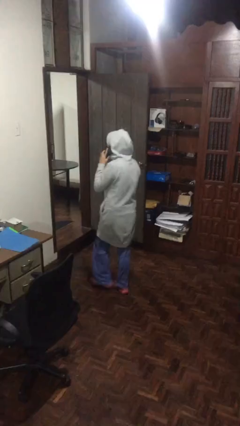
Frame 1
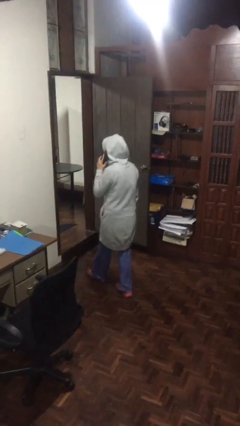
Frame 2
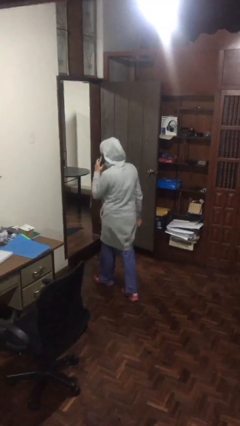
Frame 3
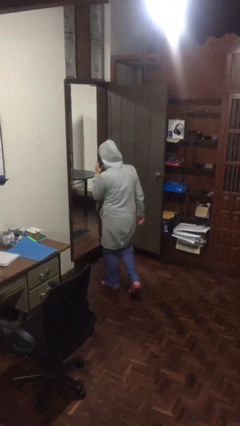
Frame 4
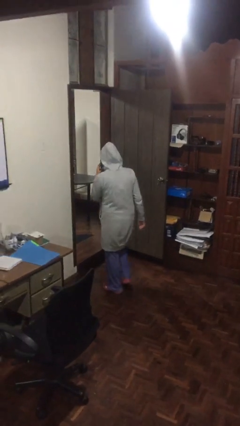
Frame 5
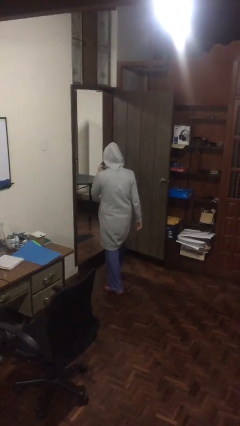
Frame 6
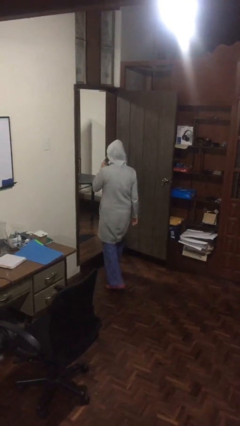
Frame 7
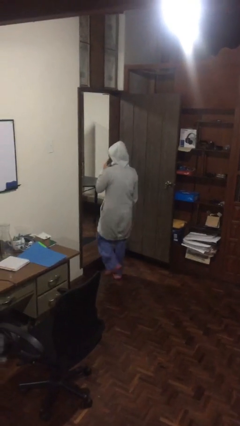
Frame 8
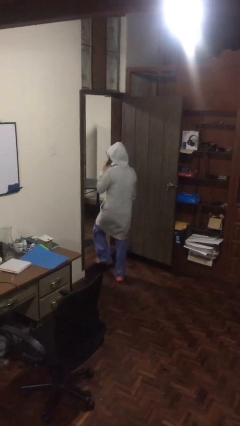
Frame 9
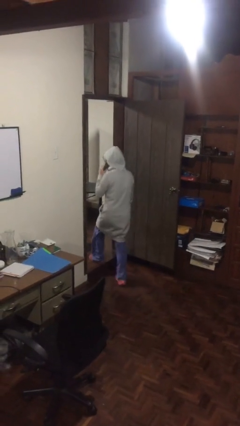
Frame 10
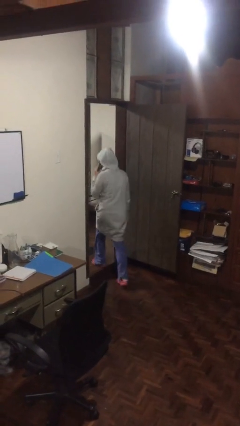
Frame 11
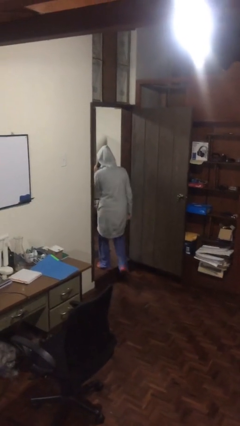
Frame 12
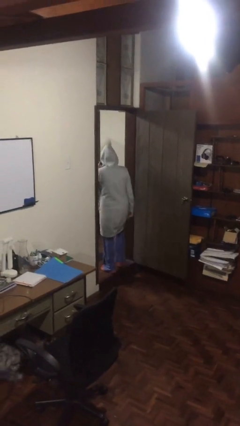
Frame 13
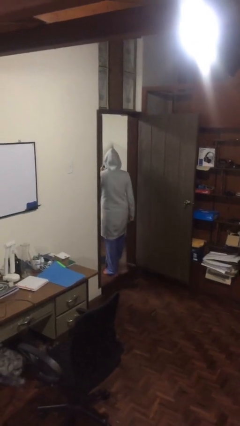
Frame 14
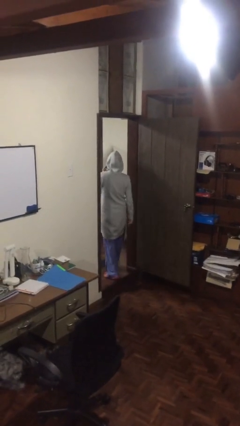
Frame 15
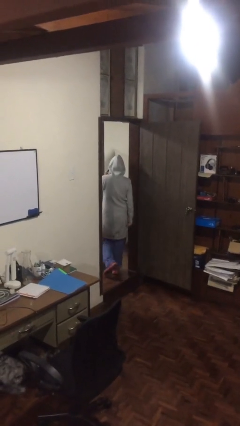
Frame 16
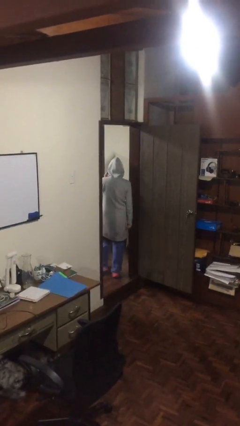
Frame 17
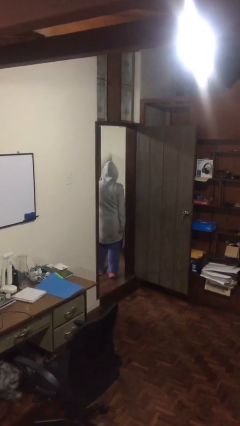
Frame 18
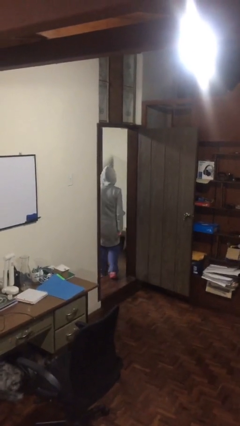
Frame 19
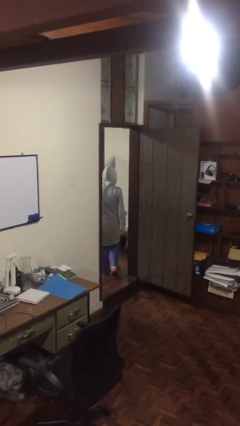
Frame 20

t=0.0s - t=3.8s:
person exits scene through structure

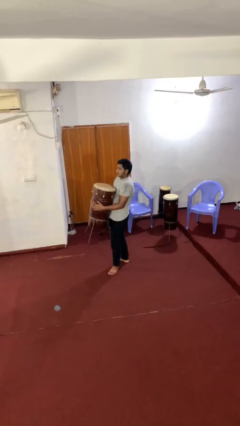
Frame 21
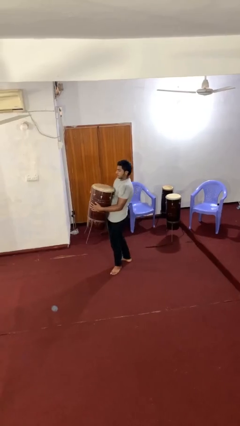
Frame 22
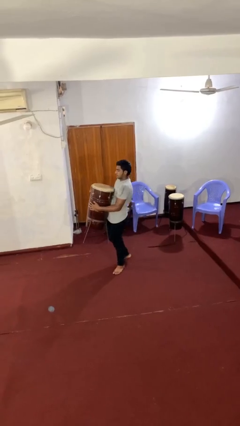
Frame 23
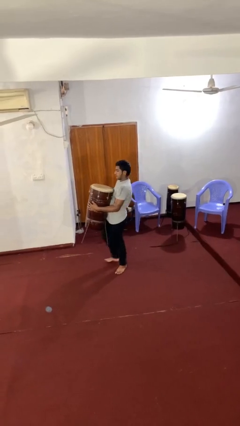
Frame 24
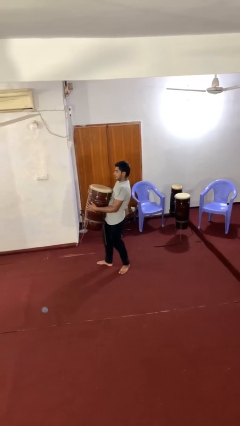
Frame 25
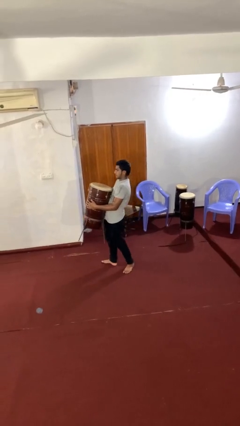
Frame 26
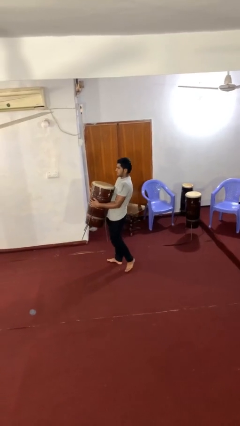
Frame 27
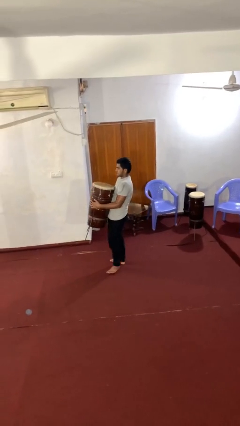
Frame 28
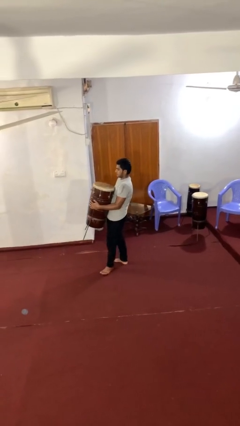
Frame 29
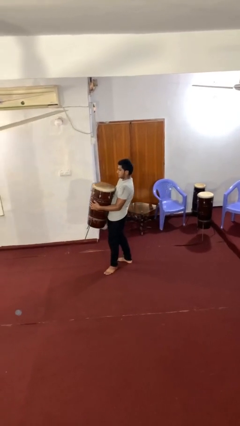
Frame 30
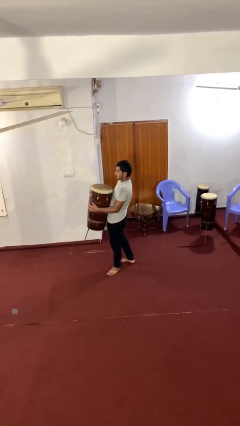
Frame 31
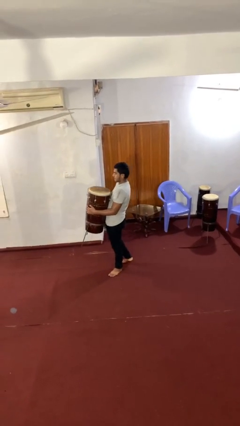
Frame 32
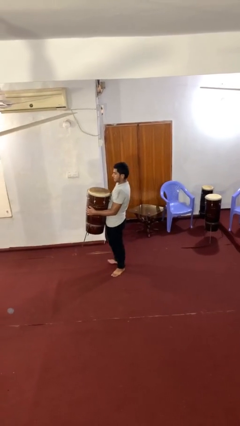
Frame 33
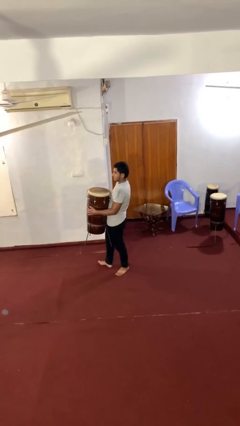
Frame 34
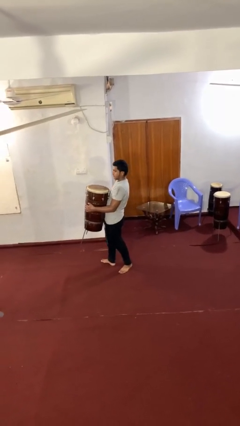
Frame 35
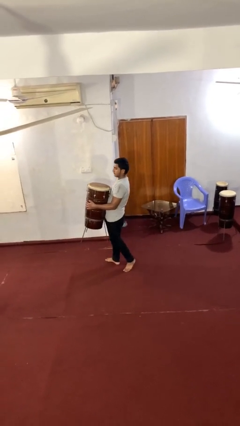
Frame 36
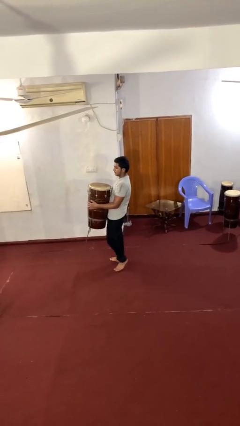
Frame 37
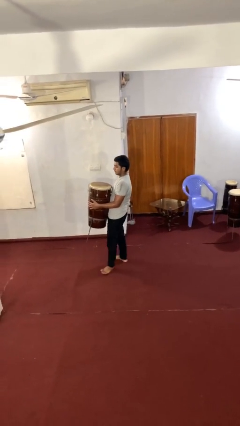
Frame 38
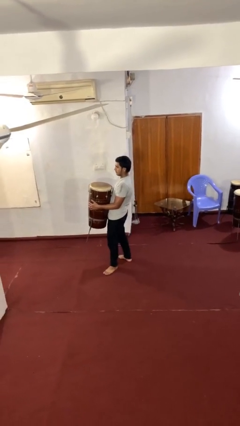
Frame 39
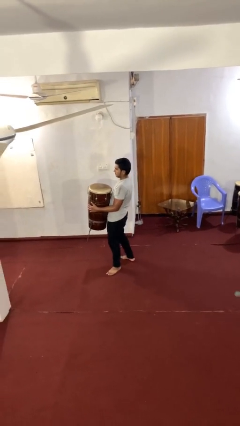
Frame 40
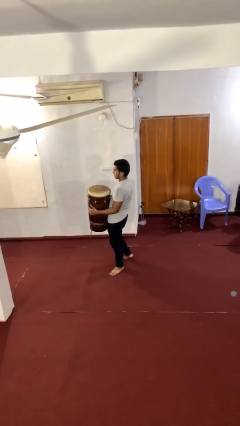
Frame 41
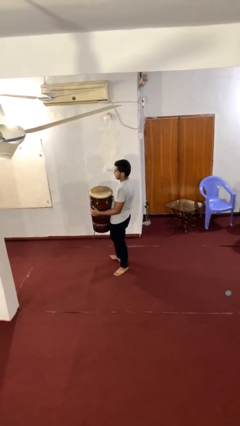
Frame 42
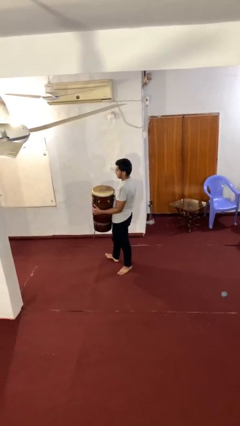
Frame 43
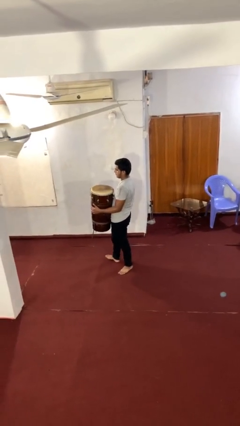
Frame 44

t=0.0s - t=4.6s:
person carries heavy object

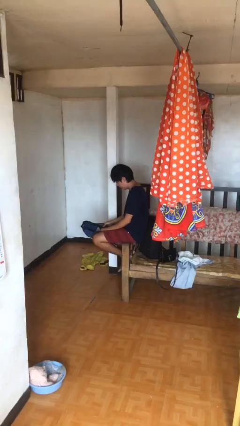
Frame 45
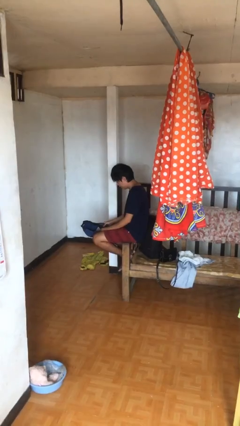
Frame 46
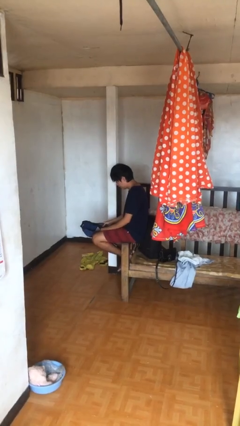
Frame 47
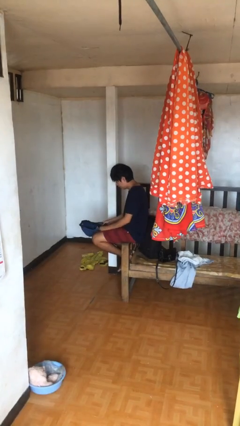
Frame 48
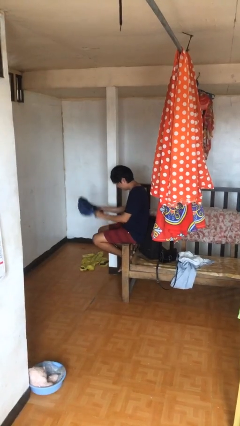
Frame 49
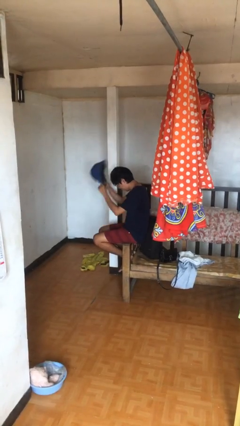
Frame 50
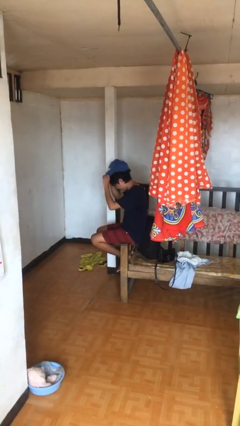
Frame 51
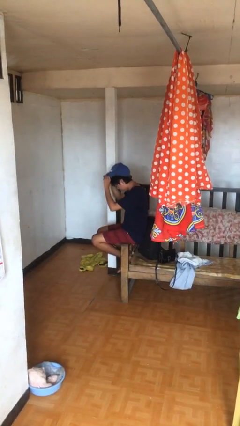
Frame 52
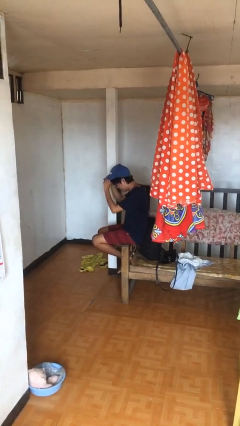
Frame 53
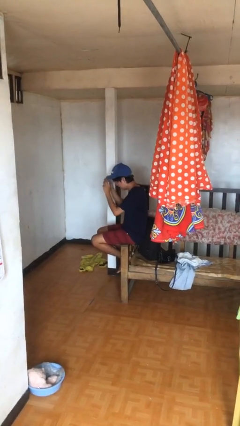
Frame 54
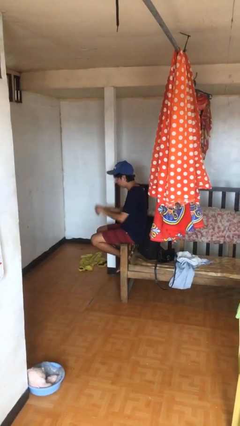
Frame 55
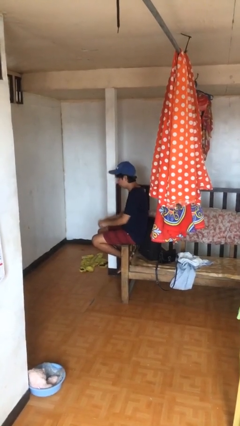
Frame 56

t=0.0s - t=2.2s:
person puts on hat

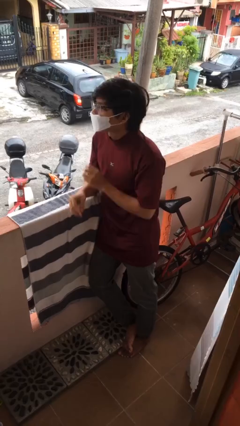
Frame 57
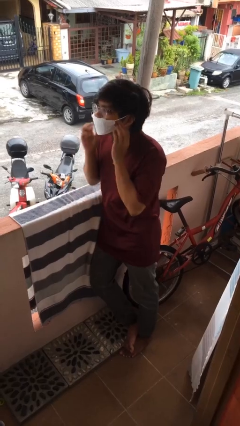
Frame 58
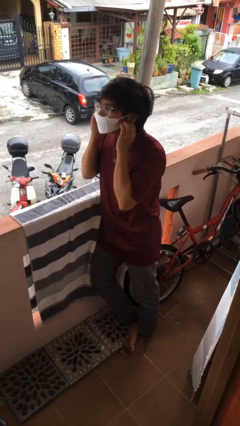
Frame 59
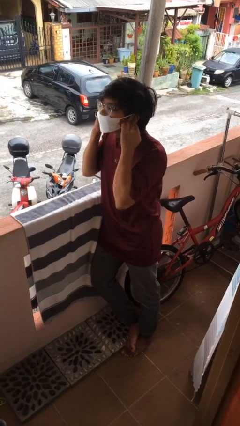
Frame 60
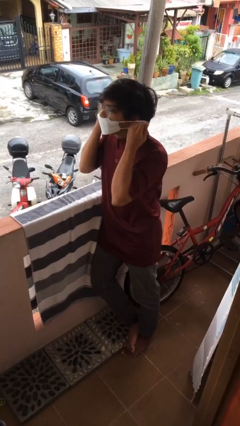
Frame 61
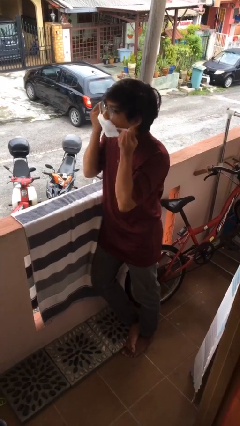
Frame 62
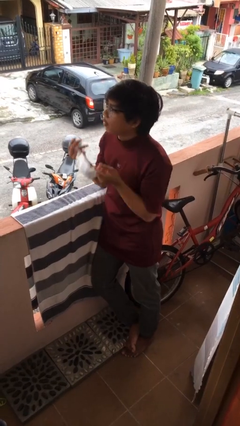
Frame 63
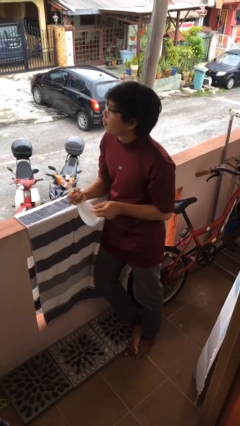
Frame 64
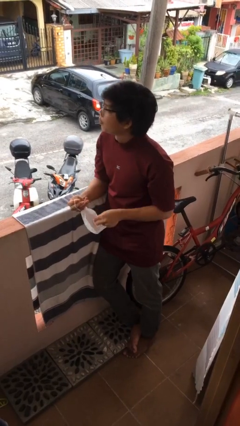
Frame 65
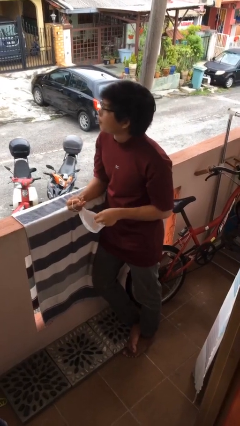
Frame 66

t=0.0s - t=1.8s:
person takes off facemask

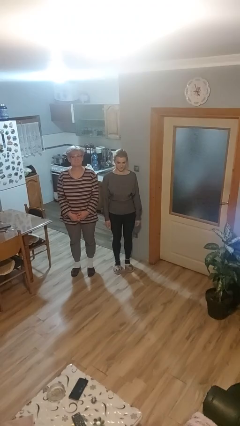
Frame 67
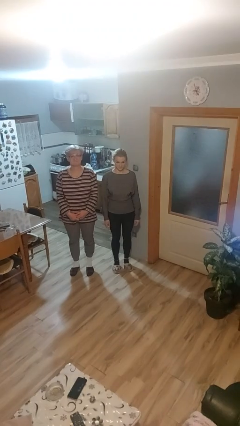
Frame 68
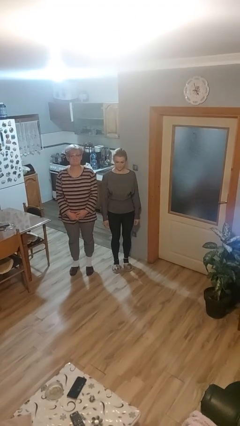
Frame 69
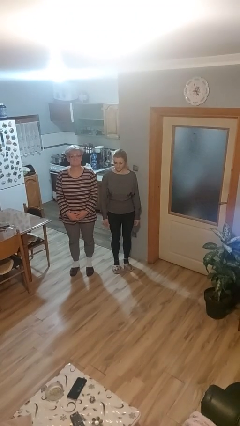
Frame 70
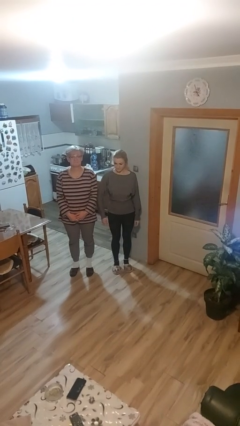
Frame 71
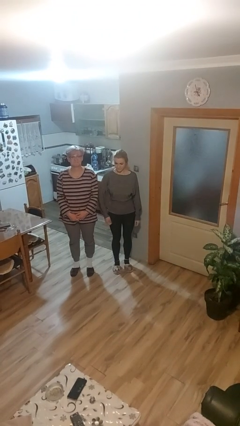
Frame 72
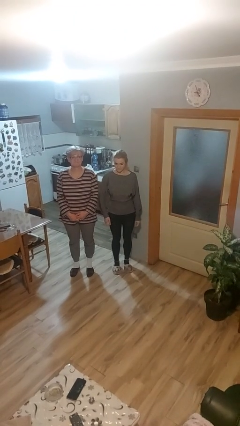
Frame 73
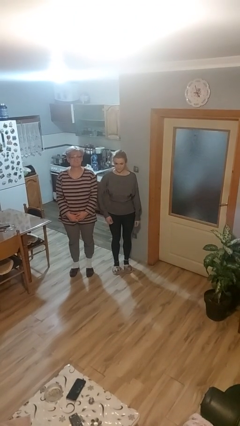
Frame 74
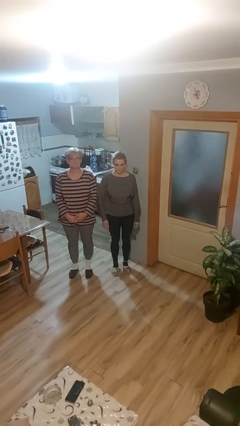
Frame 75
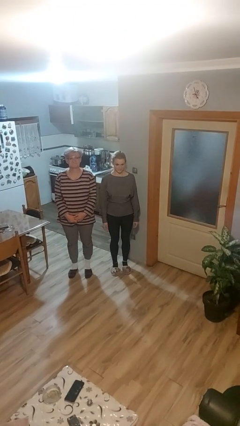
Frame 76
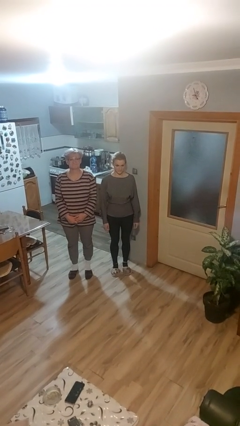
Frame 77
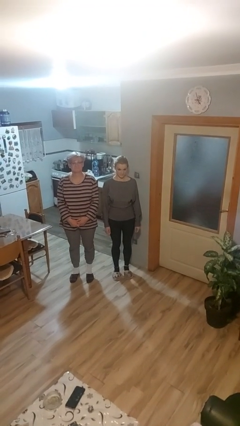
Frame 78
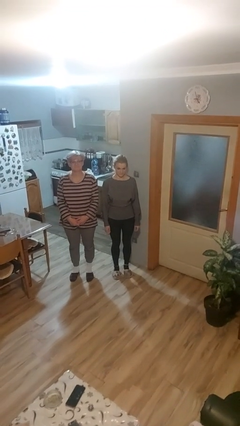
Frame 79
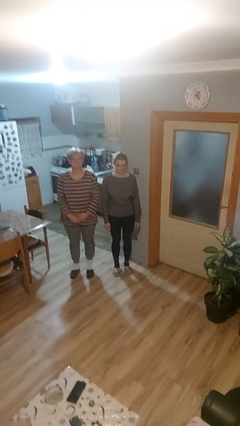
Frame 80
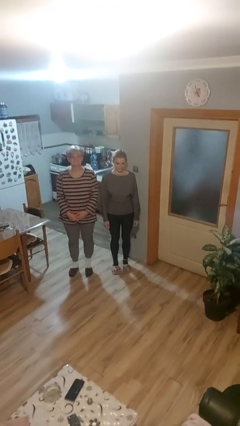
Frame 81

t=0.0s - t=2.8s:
person nudges person with elbow

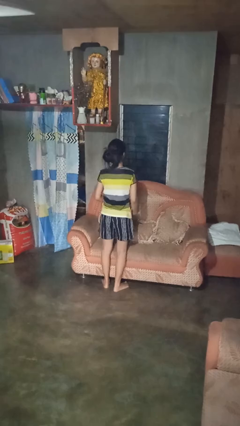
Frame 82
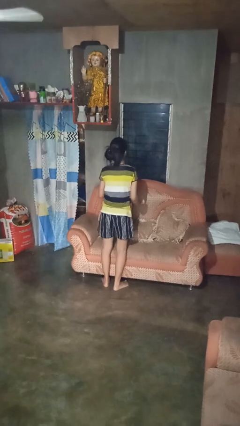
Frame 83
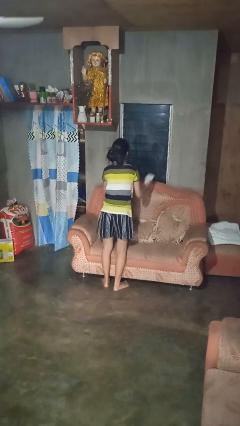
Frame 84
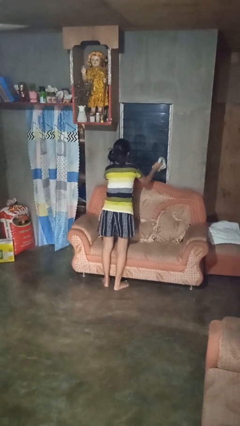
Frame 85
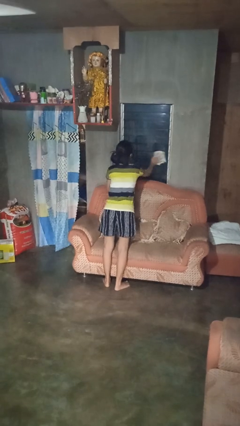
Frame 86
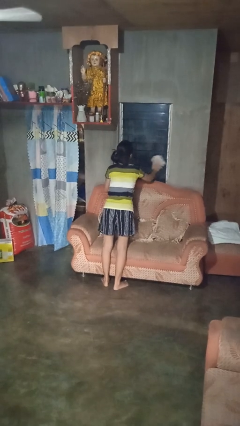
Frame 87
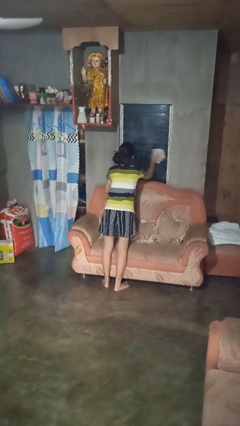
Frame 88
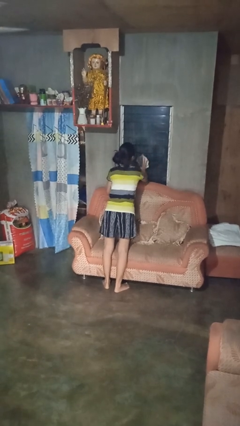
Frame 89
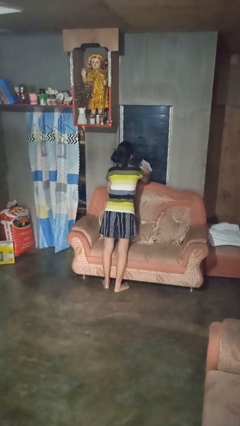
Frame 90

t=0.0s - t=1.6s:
person washes window

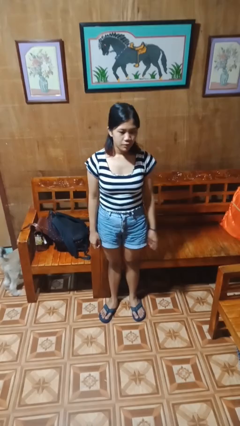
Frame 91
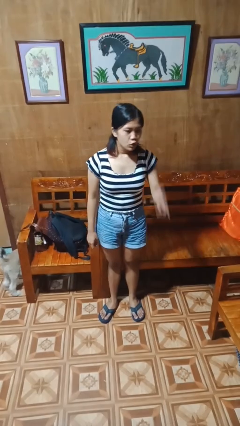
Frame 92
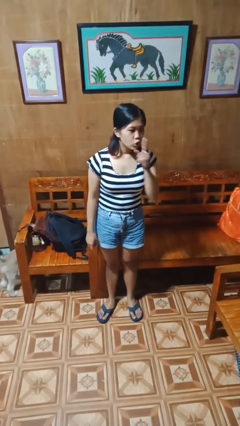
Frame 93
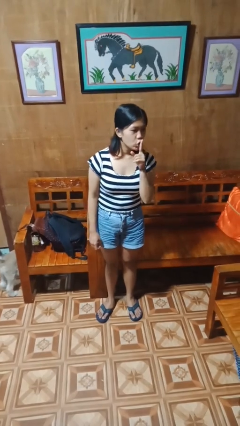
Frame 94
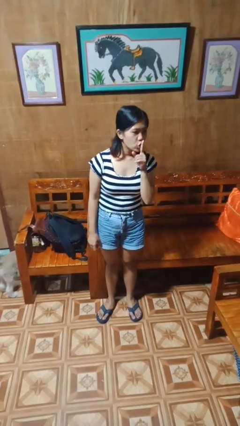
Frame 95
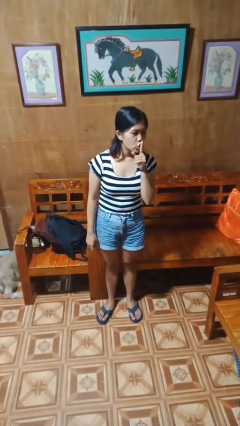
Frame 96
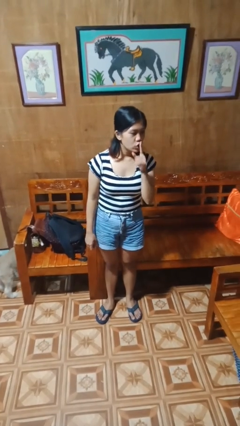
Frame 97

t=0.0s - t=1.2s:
person gestures be quiet
